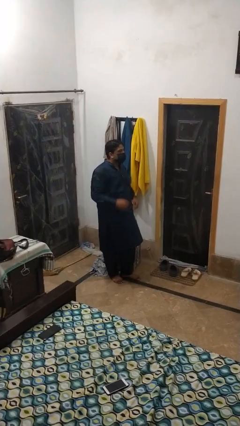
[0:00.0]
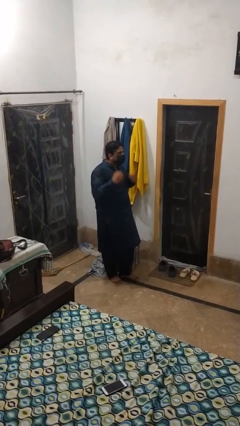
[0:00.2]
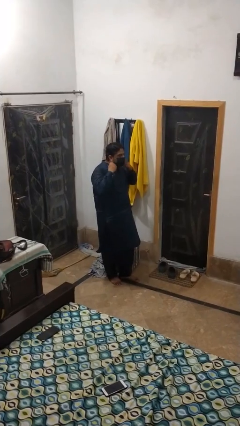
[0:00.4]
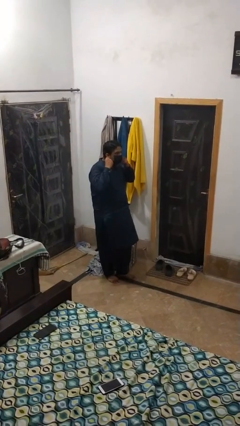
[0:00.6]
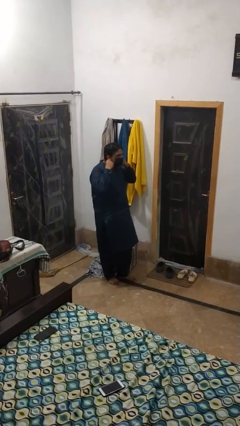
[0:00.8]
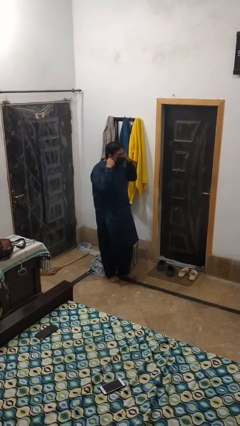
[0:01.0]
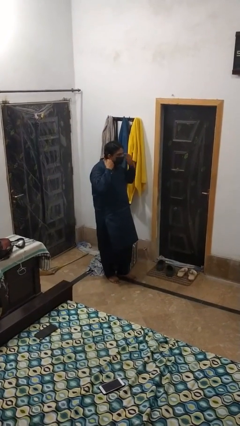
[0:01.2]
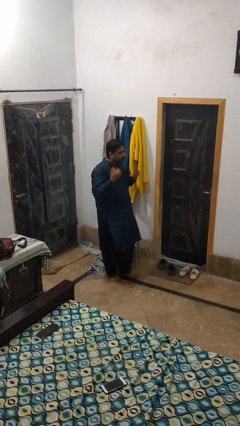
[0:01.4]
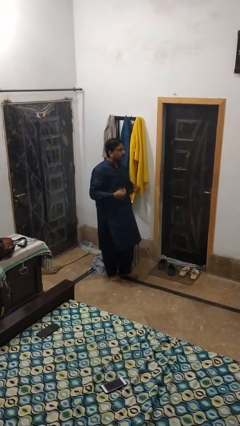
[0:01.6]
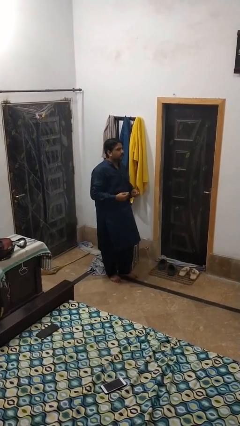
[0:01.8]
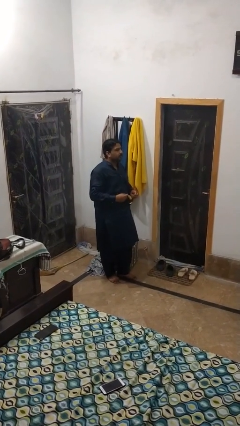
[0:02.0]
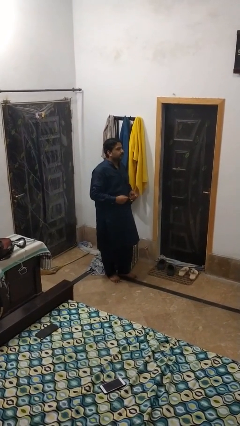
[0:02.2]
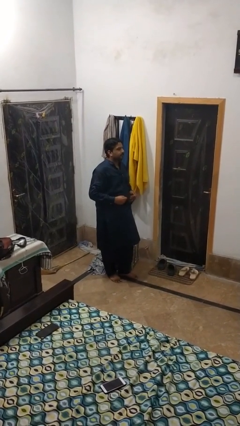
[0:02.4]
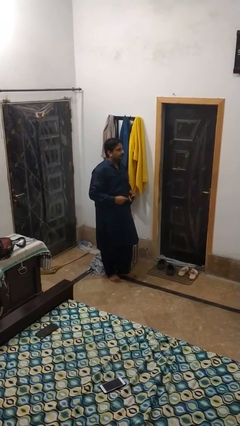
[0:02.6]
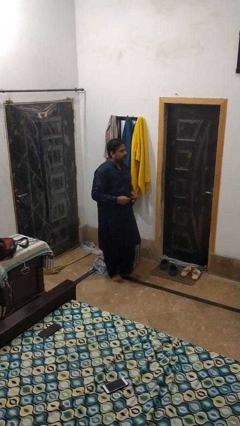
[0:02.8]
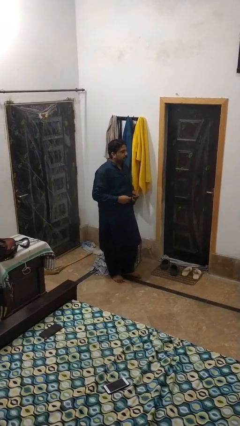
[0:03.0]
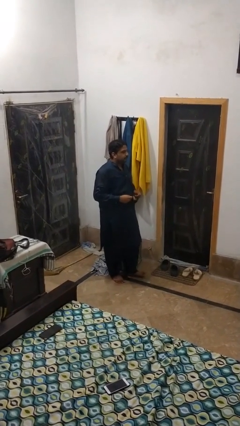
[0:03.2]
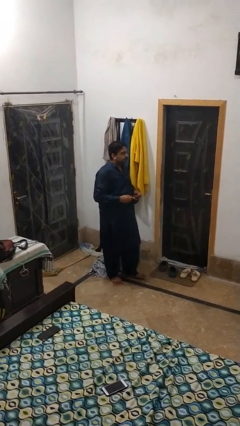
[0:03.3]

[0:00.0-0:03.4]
person takes off facemask

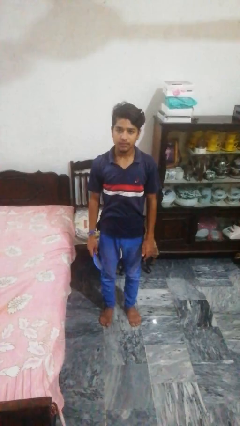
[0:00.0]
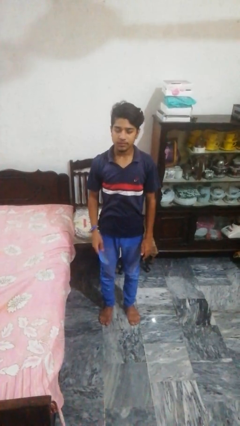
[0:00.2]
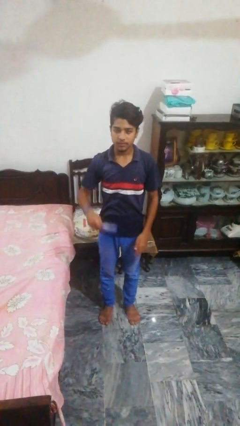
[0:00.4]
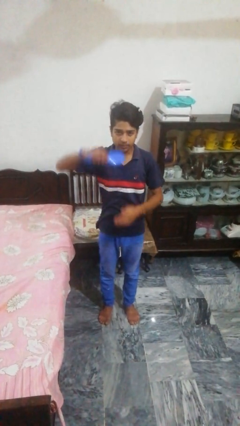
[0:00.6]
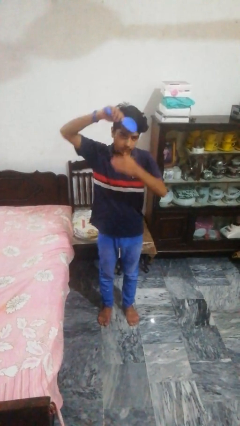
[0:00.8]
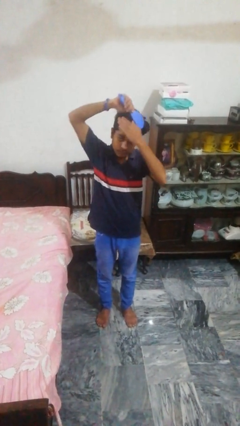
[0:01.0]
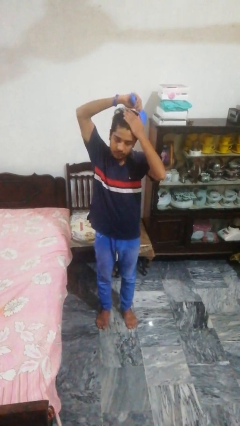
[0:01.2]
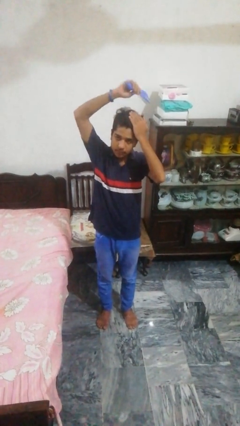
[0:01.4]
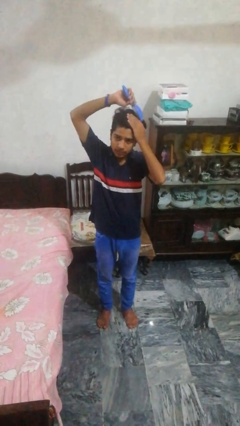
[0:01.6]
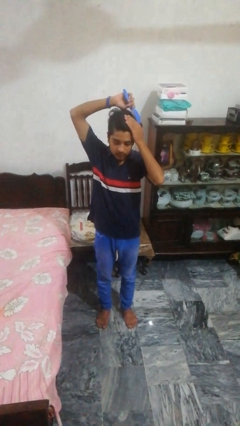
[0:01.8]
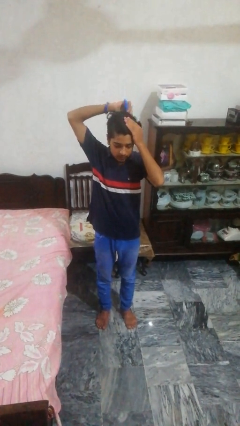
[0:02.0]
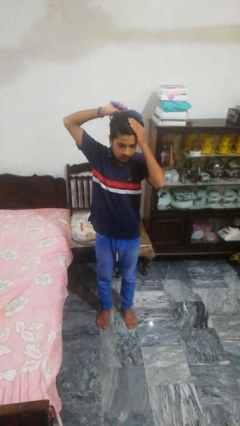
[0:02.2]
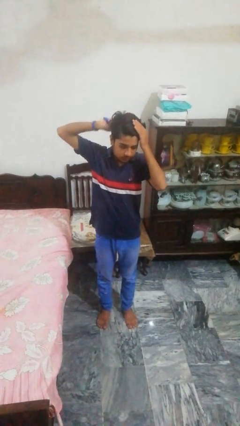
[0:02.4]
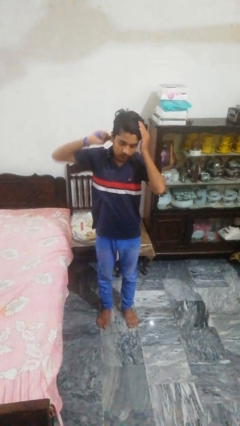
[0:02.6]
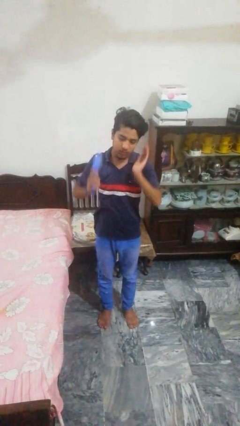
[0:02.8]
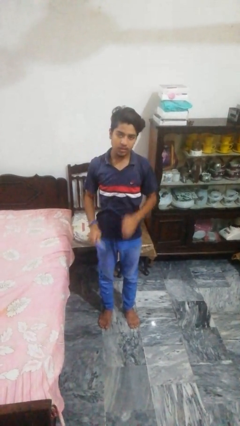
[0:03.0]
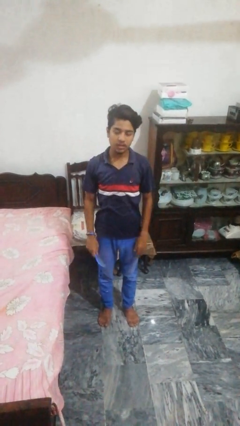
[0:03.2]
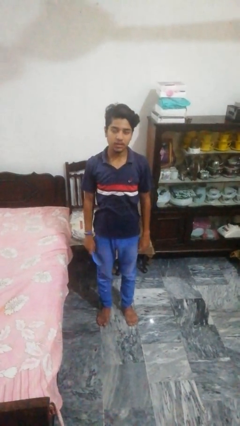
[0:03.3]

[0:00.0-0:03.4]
person brushes hair

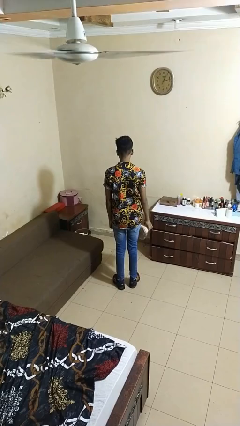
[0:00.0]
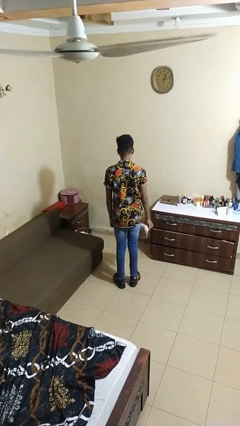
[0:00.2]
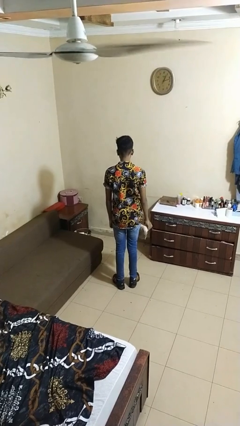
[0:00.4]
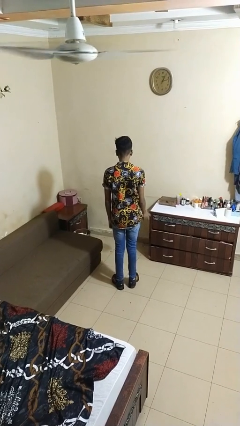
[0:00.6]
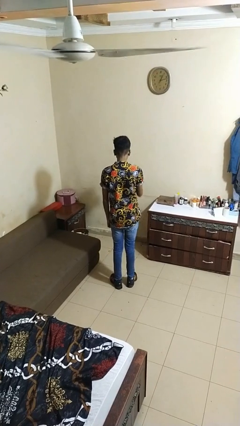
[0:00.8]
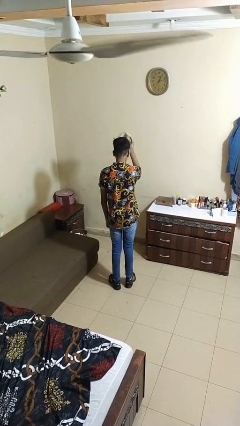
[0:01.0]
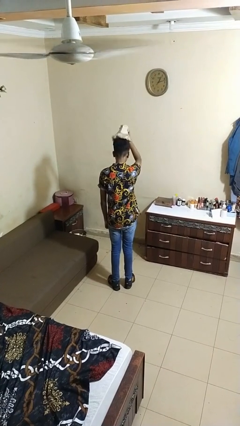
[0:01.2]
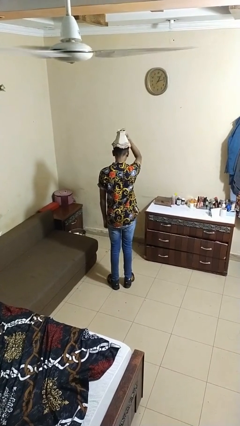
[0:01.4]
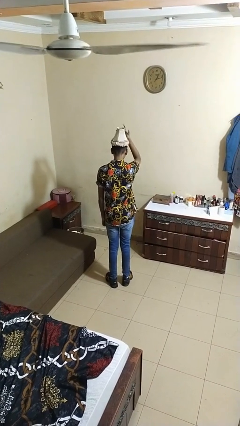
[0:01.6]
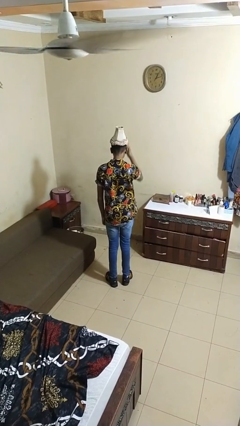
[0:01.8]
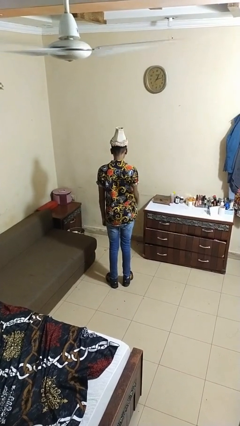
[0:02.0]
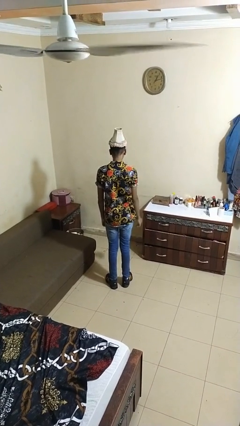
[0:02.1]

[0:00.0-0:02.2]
person puts on hat

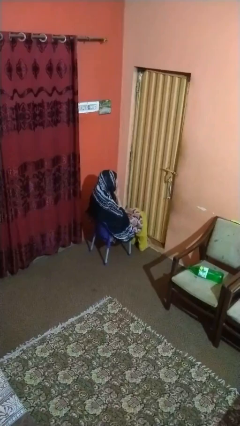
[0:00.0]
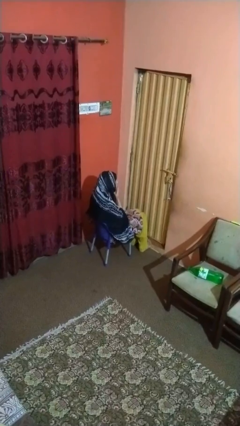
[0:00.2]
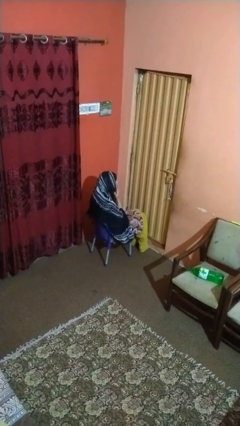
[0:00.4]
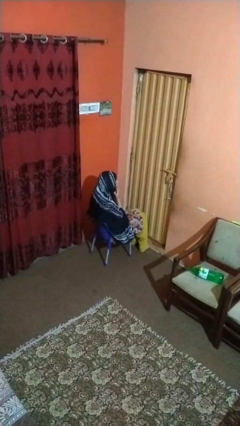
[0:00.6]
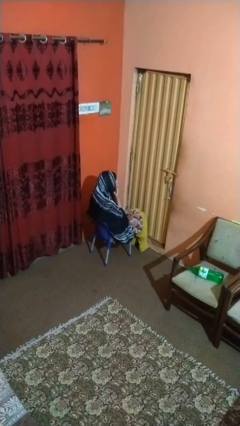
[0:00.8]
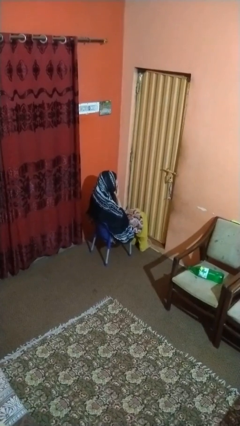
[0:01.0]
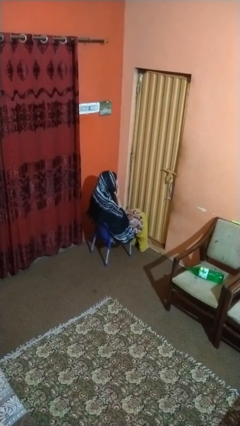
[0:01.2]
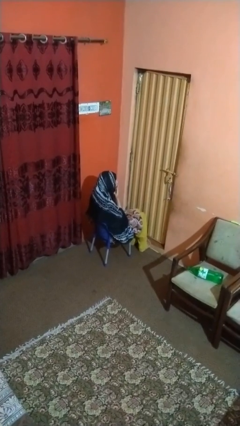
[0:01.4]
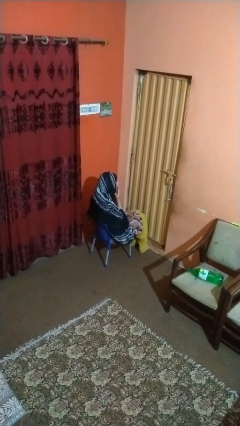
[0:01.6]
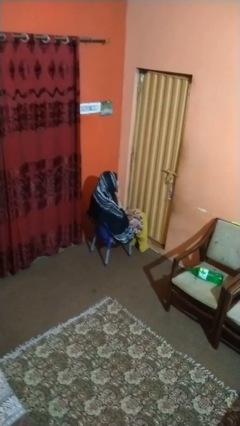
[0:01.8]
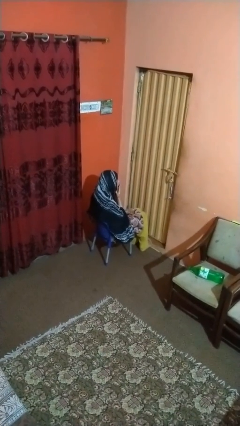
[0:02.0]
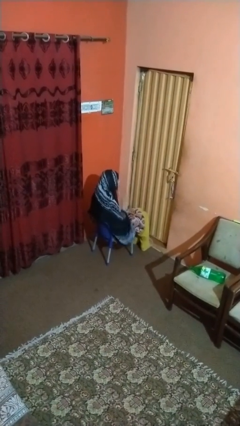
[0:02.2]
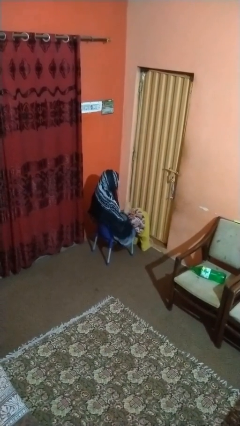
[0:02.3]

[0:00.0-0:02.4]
person yawns

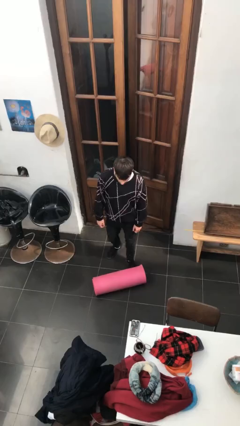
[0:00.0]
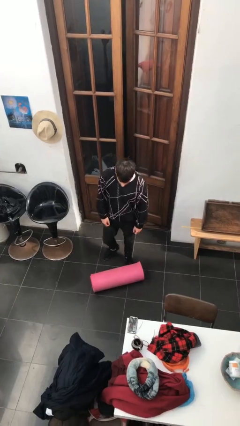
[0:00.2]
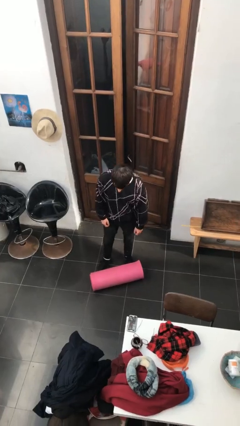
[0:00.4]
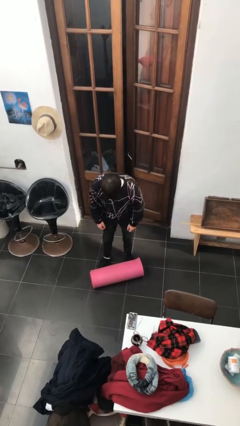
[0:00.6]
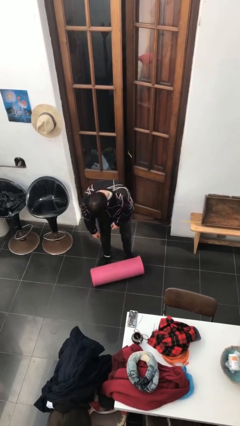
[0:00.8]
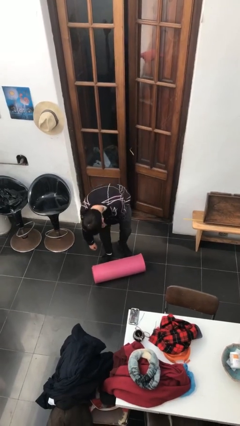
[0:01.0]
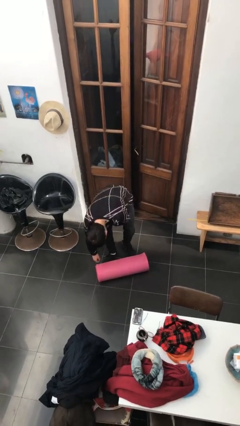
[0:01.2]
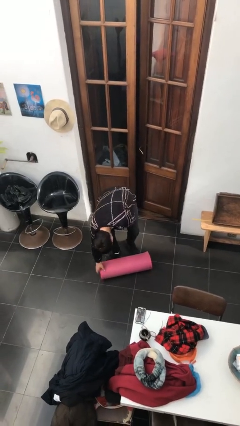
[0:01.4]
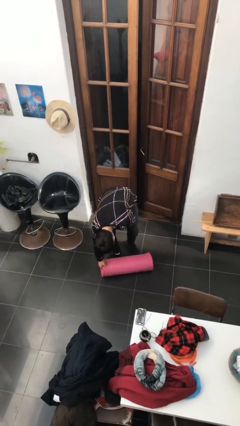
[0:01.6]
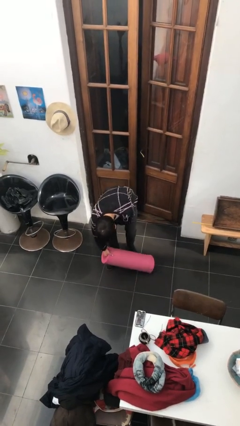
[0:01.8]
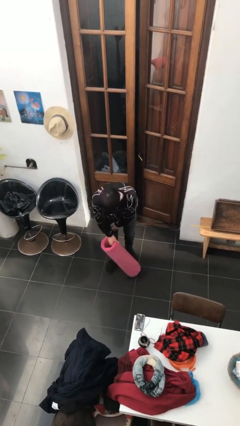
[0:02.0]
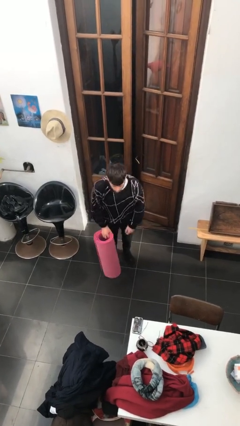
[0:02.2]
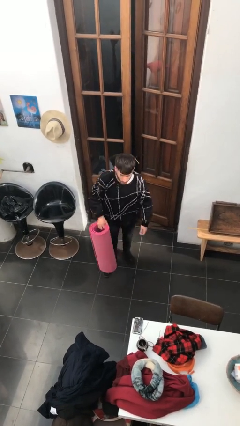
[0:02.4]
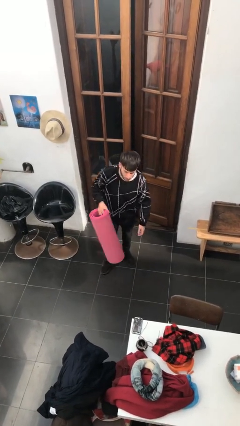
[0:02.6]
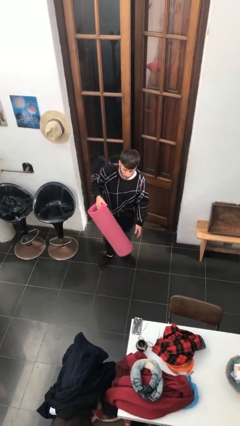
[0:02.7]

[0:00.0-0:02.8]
person picks up object from floor

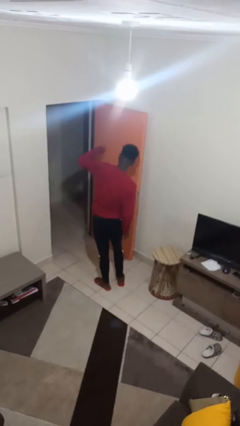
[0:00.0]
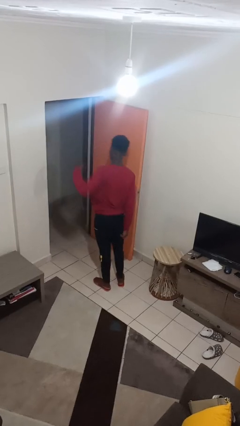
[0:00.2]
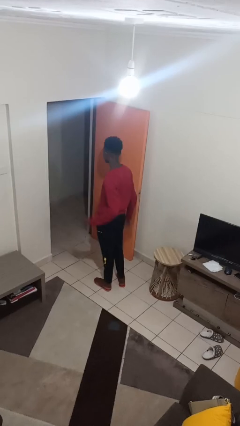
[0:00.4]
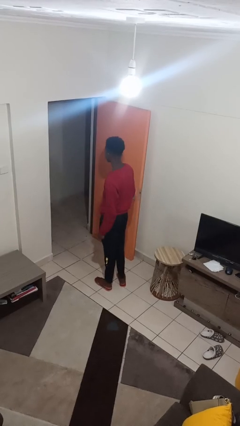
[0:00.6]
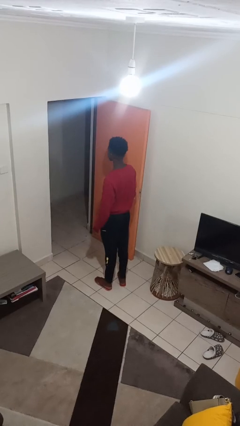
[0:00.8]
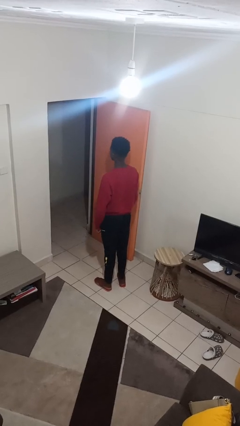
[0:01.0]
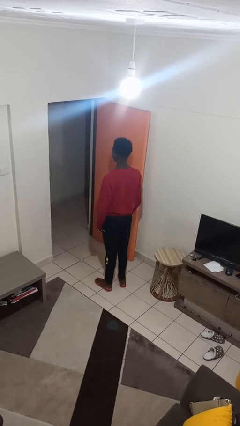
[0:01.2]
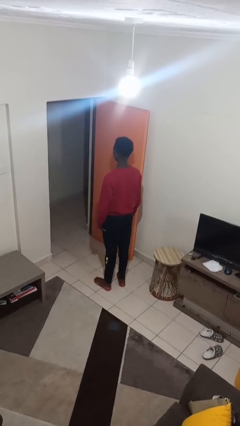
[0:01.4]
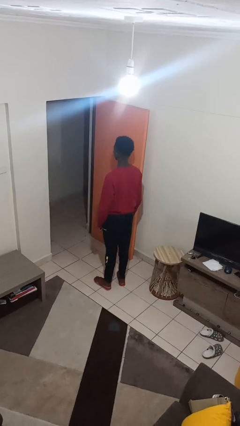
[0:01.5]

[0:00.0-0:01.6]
person punches

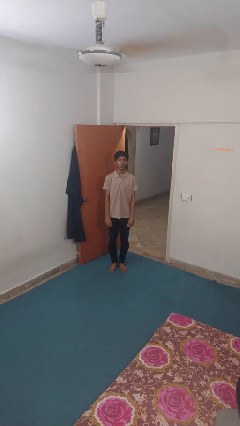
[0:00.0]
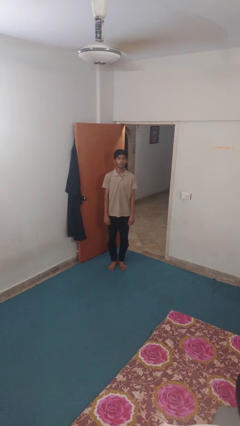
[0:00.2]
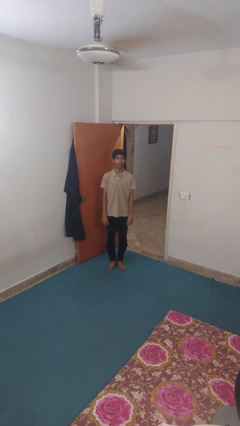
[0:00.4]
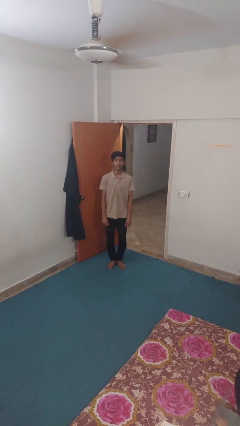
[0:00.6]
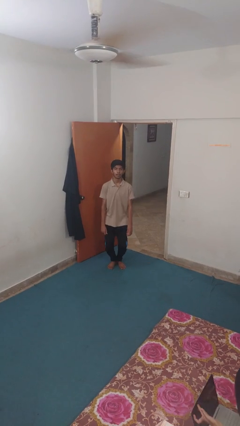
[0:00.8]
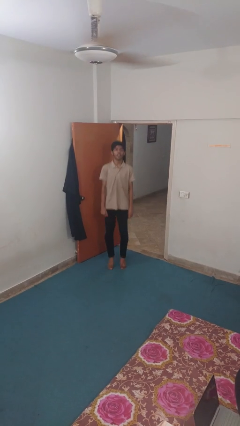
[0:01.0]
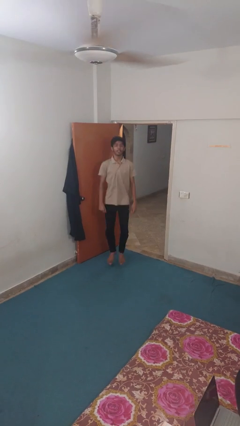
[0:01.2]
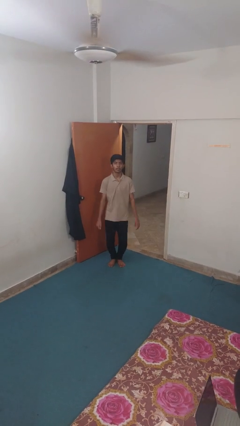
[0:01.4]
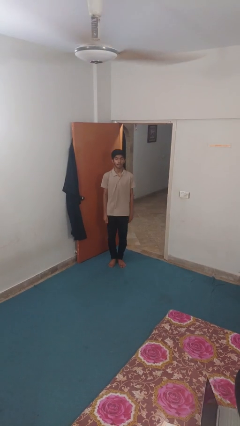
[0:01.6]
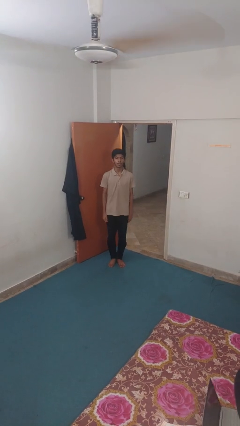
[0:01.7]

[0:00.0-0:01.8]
person jumps
